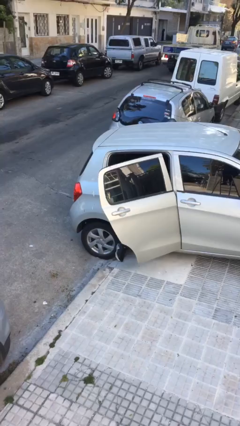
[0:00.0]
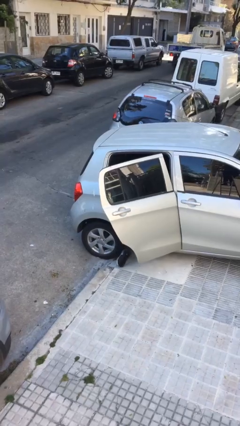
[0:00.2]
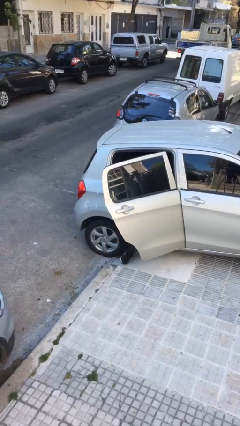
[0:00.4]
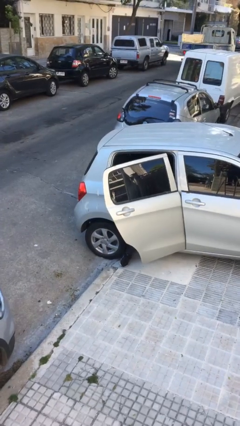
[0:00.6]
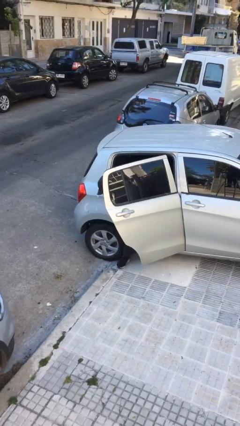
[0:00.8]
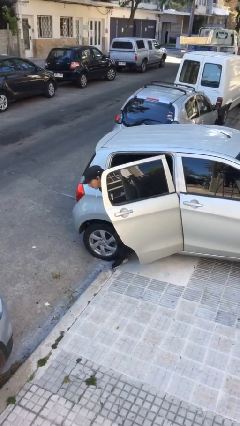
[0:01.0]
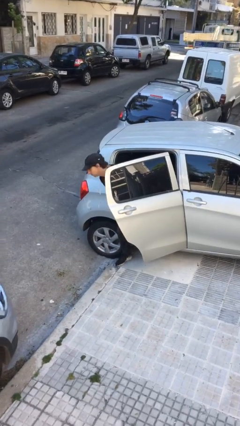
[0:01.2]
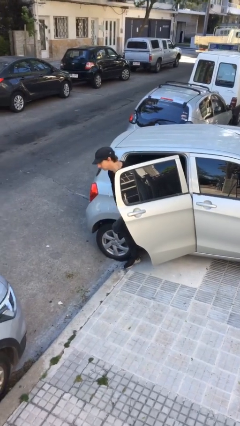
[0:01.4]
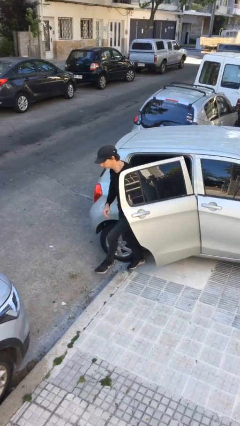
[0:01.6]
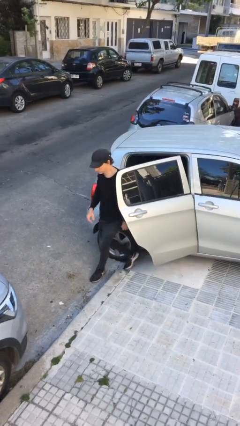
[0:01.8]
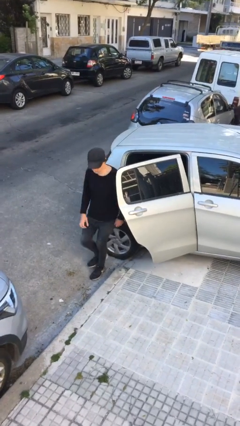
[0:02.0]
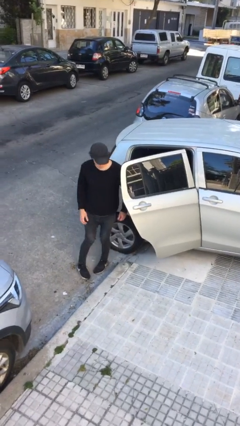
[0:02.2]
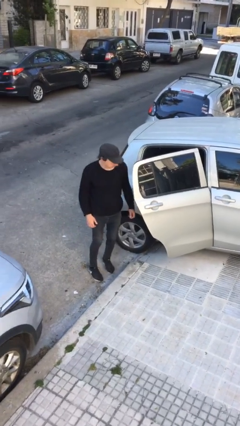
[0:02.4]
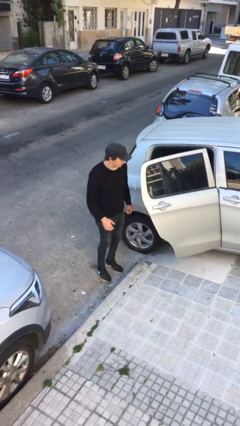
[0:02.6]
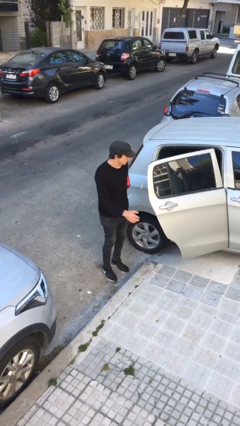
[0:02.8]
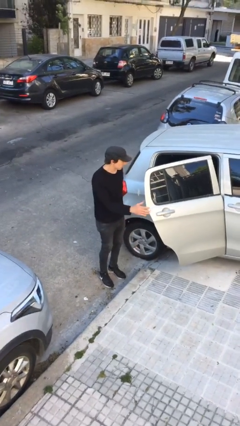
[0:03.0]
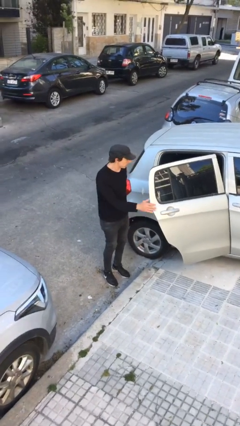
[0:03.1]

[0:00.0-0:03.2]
person exits car

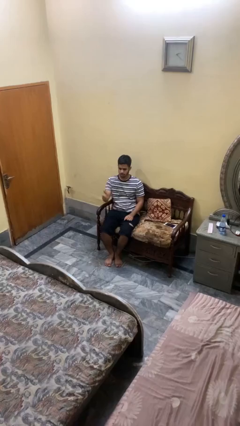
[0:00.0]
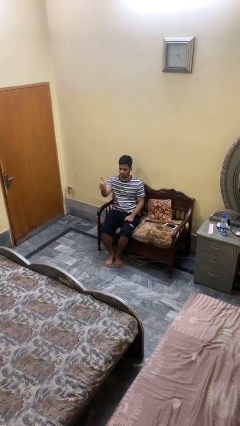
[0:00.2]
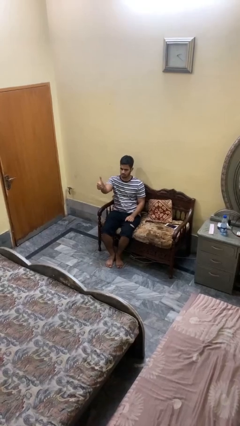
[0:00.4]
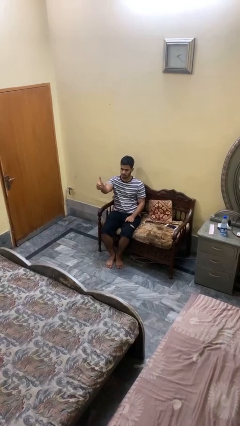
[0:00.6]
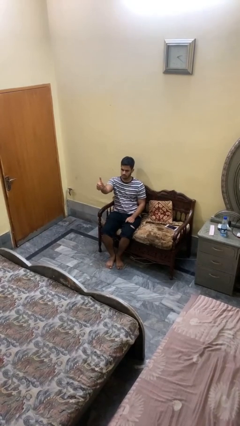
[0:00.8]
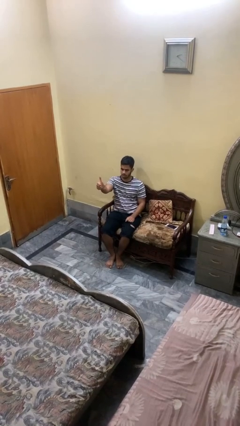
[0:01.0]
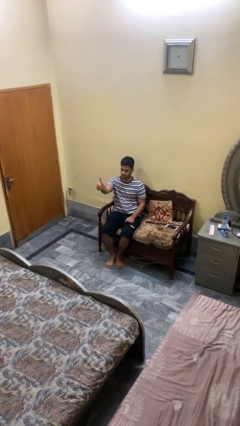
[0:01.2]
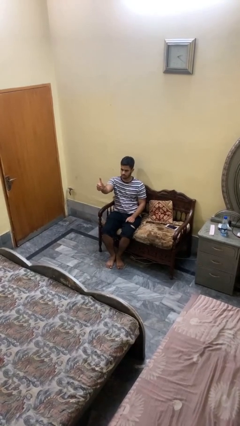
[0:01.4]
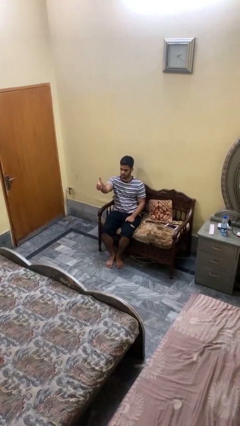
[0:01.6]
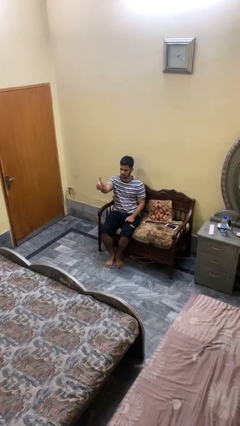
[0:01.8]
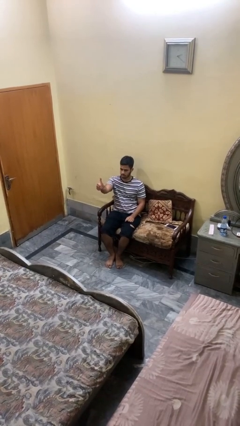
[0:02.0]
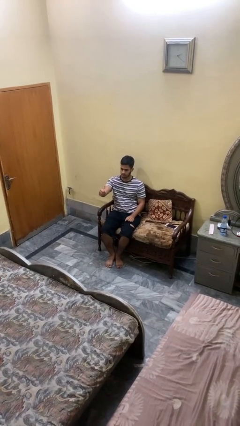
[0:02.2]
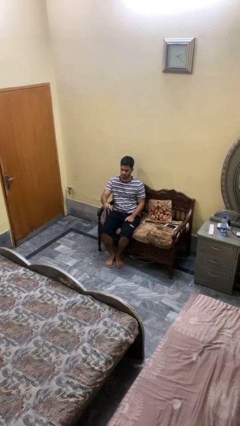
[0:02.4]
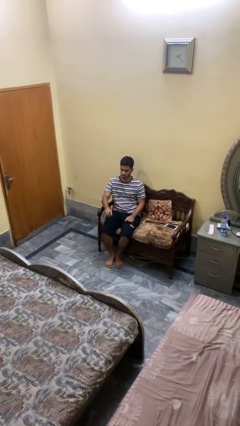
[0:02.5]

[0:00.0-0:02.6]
person gestures thumbs up

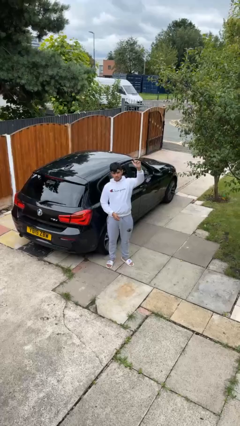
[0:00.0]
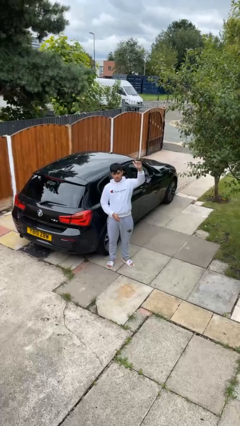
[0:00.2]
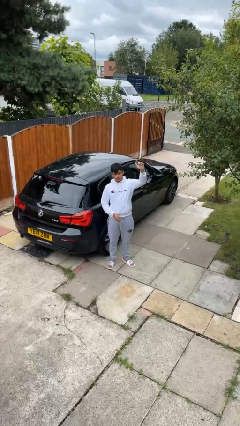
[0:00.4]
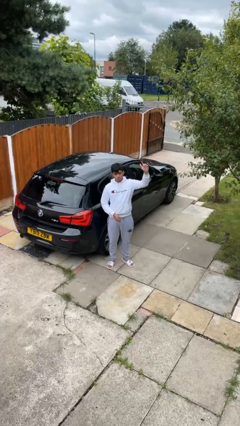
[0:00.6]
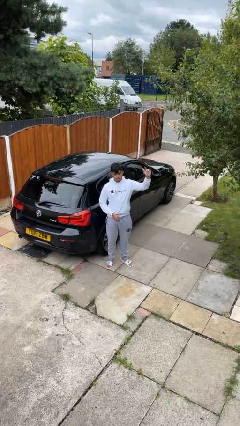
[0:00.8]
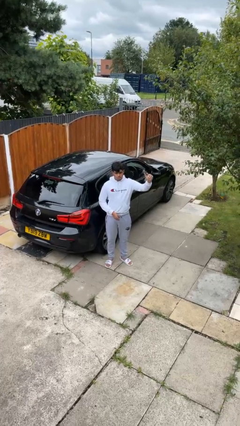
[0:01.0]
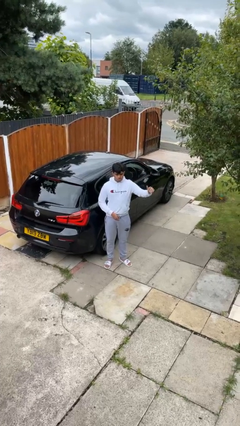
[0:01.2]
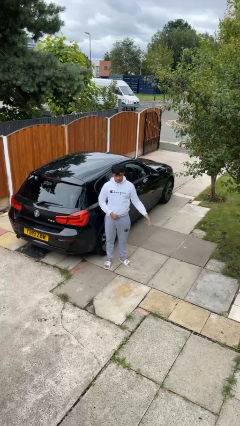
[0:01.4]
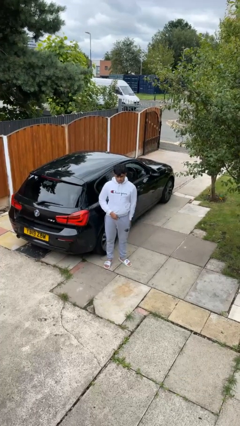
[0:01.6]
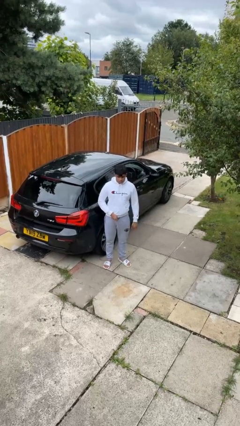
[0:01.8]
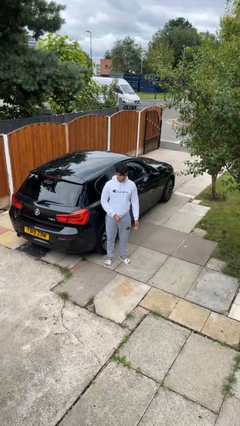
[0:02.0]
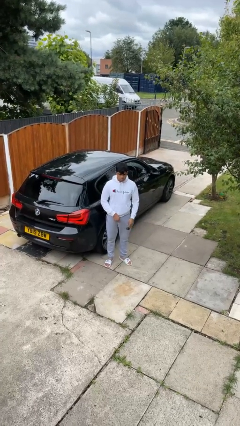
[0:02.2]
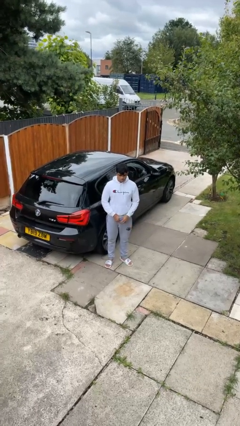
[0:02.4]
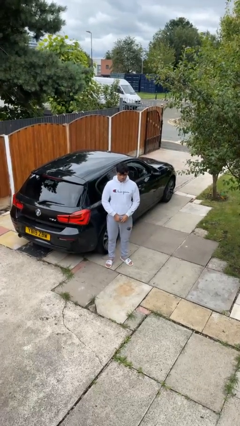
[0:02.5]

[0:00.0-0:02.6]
person gestures lower hand

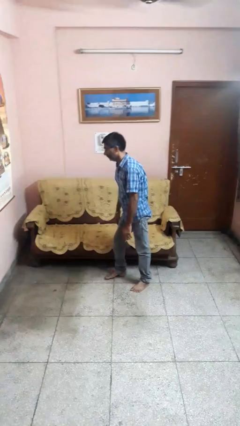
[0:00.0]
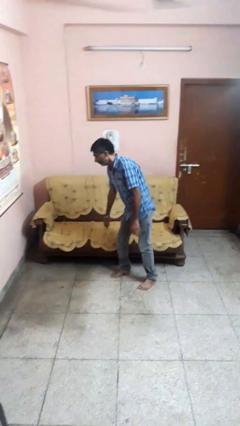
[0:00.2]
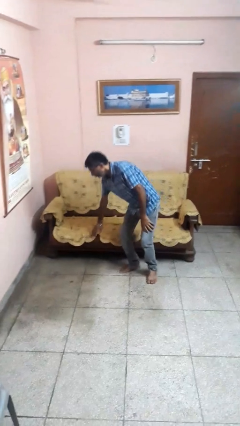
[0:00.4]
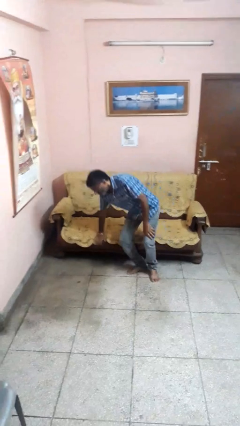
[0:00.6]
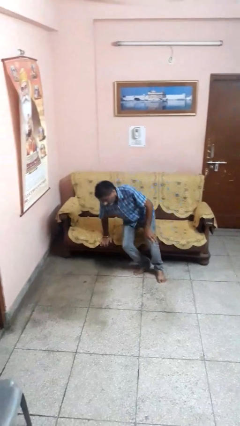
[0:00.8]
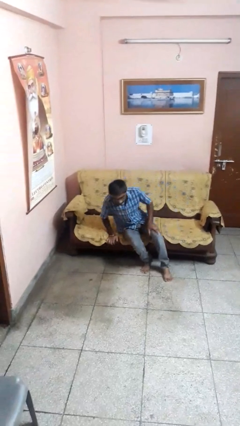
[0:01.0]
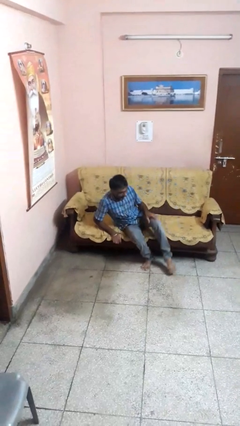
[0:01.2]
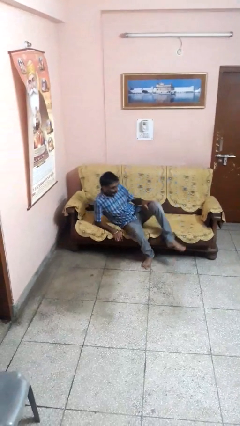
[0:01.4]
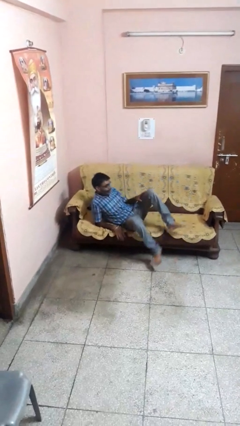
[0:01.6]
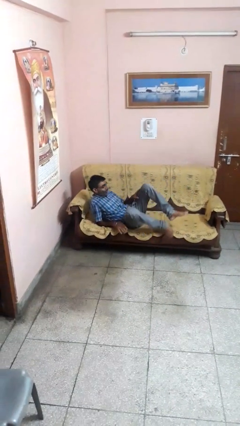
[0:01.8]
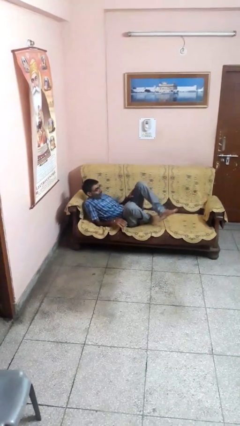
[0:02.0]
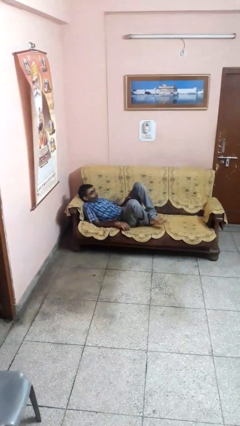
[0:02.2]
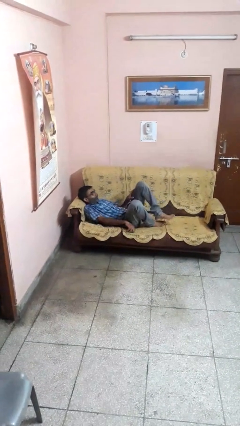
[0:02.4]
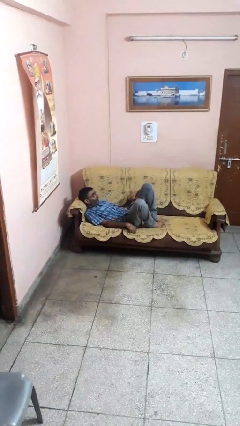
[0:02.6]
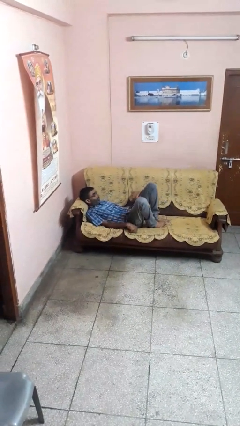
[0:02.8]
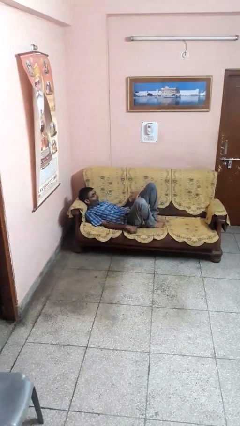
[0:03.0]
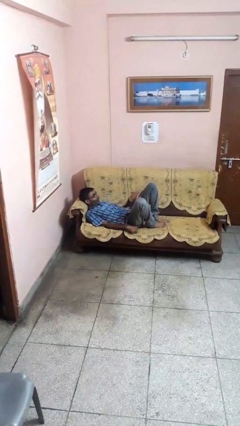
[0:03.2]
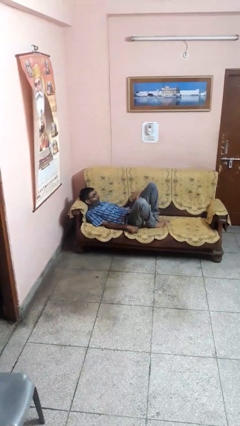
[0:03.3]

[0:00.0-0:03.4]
person lies down on couch

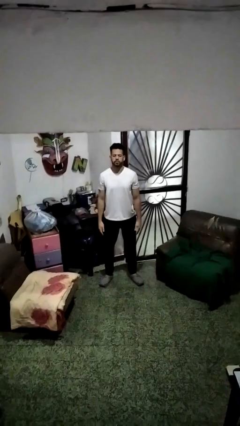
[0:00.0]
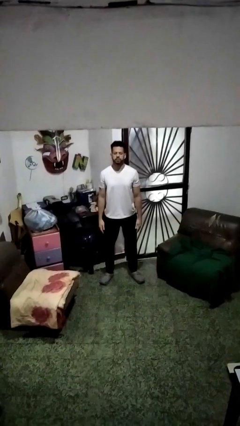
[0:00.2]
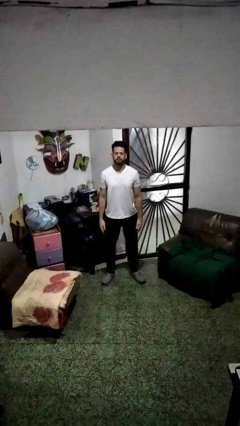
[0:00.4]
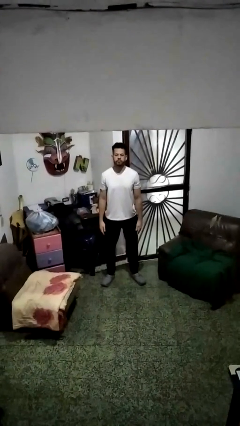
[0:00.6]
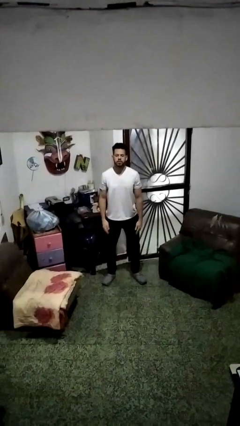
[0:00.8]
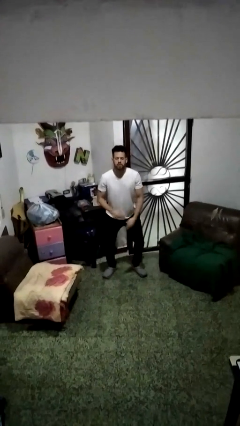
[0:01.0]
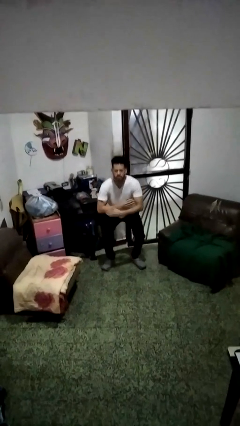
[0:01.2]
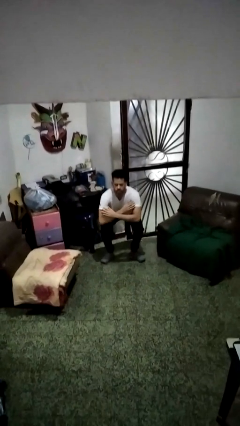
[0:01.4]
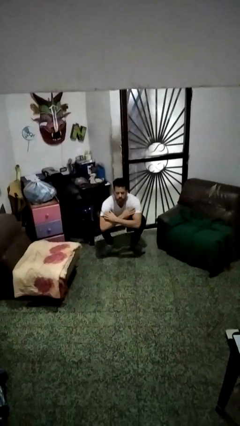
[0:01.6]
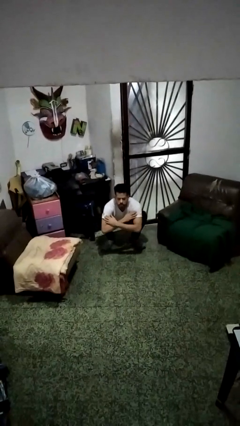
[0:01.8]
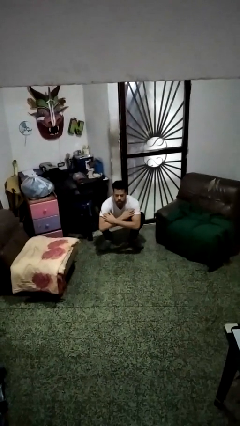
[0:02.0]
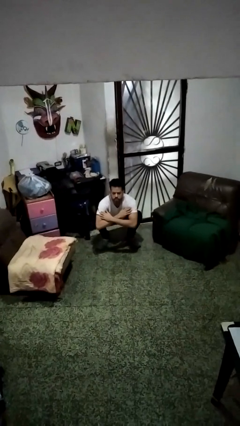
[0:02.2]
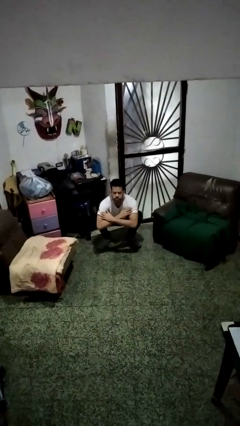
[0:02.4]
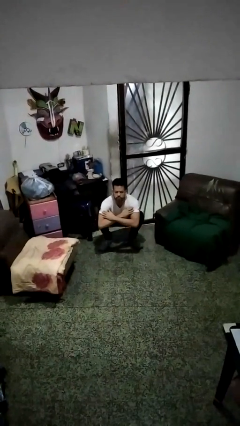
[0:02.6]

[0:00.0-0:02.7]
person squats

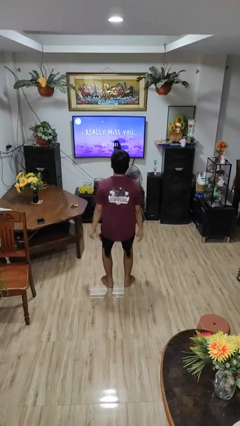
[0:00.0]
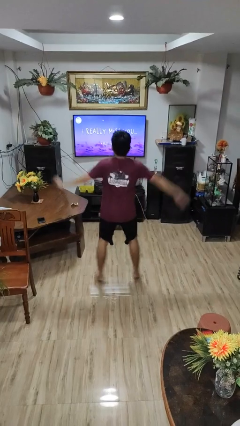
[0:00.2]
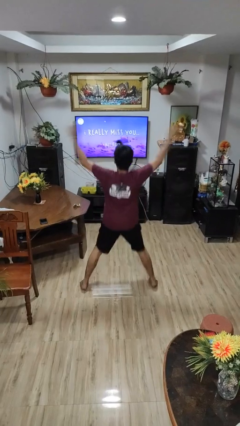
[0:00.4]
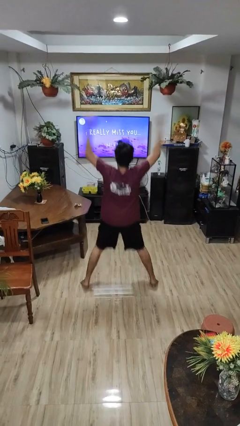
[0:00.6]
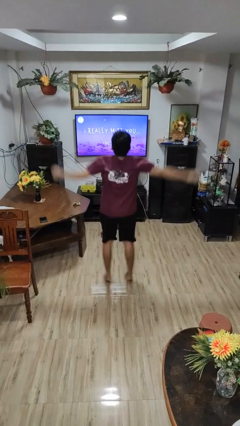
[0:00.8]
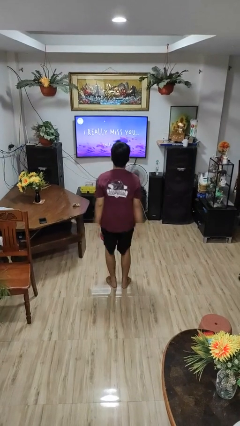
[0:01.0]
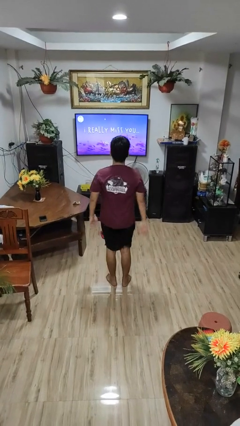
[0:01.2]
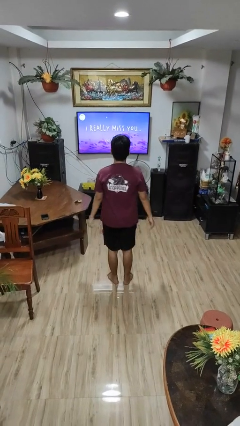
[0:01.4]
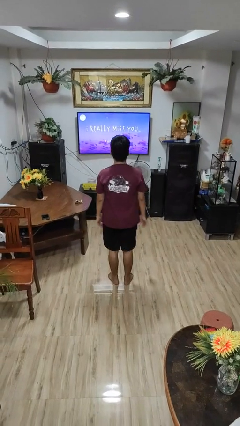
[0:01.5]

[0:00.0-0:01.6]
person exercises with jumping jacks

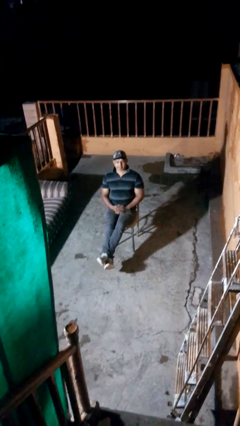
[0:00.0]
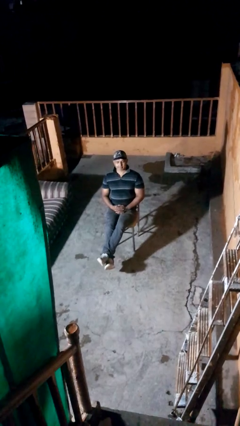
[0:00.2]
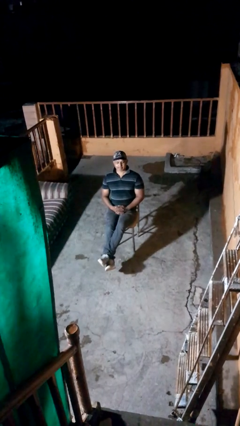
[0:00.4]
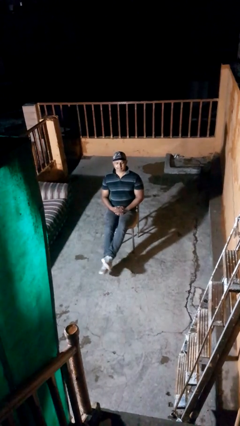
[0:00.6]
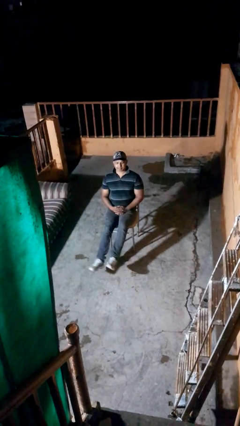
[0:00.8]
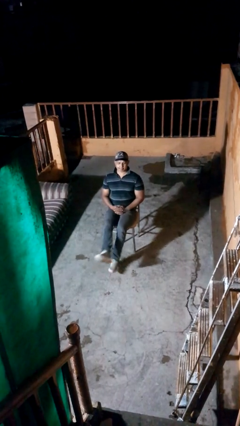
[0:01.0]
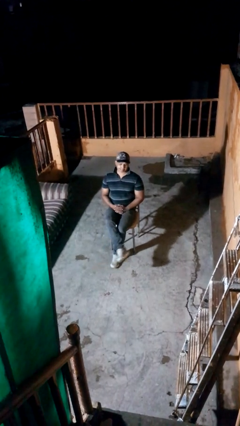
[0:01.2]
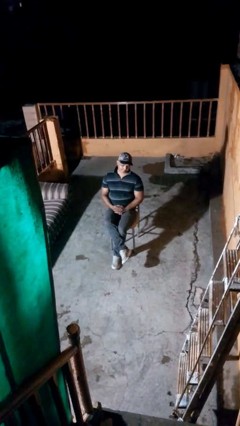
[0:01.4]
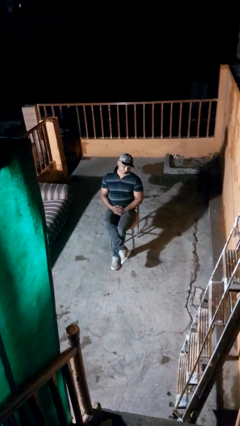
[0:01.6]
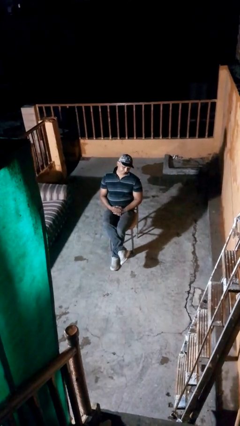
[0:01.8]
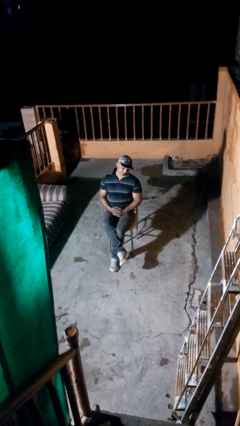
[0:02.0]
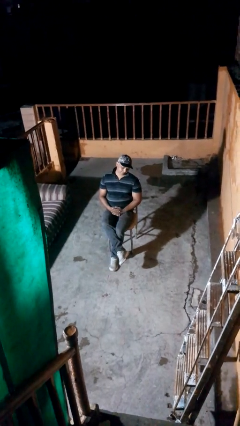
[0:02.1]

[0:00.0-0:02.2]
person crosses legs
